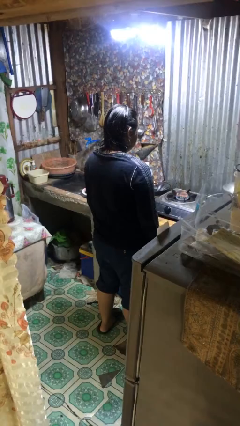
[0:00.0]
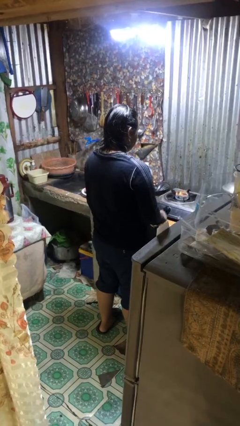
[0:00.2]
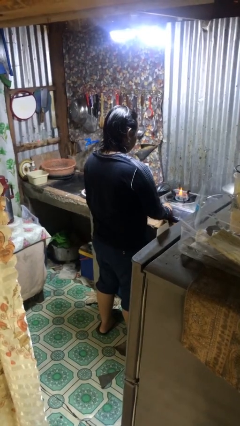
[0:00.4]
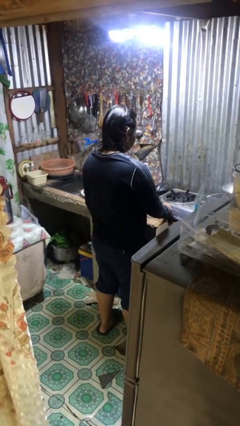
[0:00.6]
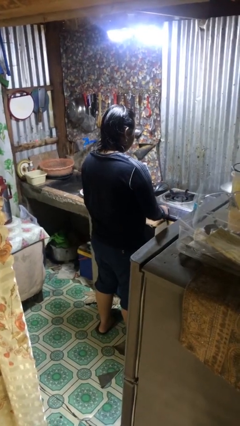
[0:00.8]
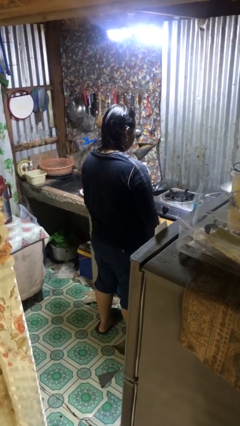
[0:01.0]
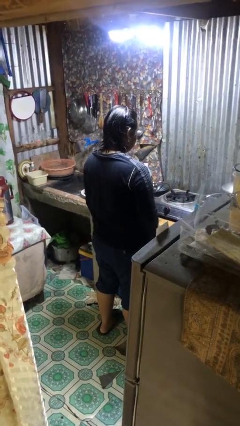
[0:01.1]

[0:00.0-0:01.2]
person turns off stovetop

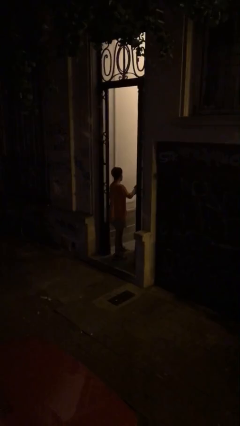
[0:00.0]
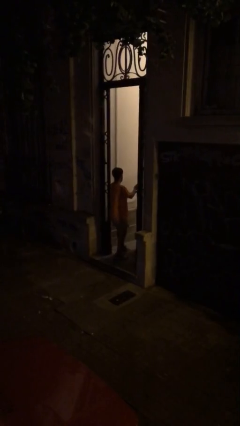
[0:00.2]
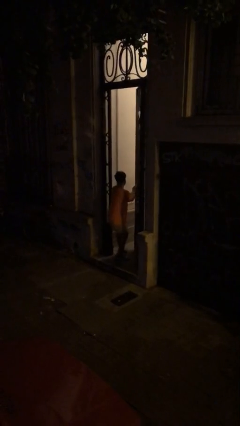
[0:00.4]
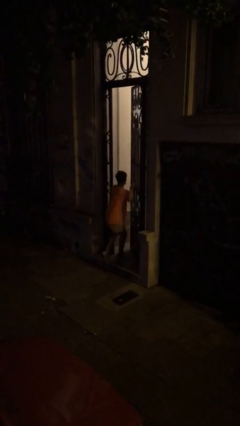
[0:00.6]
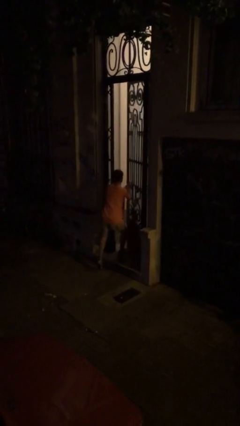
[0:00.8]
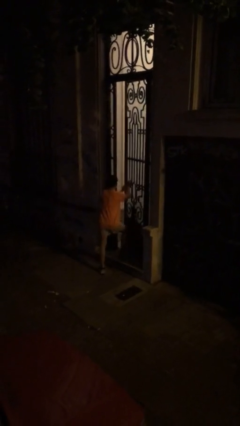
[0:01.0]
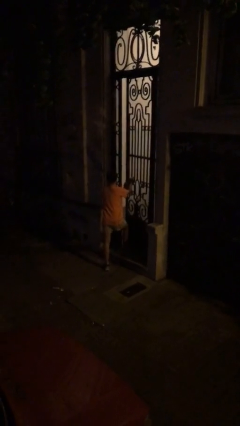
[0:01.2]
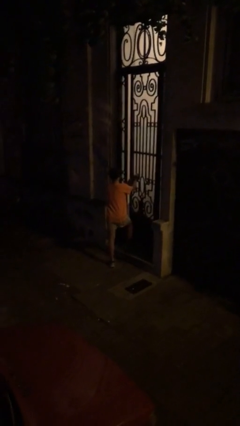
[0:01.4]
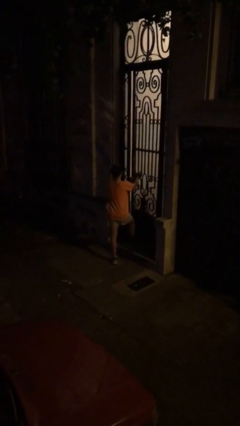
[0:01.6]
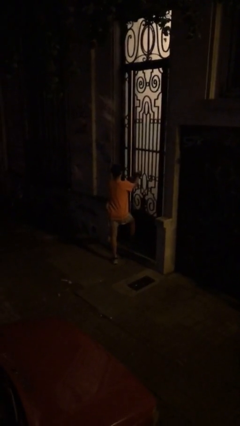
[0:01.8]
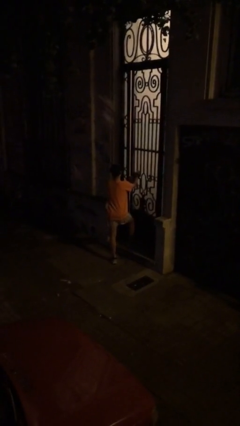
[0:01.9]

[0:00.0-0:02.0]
person closes facility door

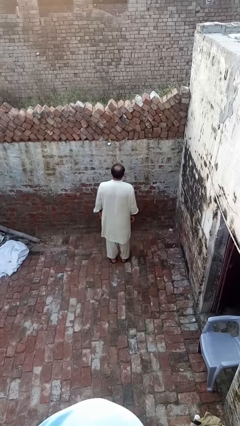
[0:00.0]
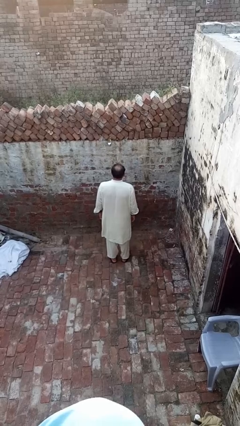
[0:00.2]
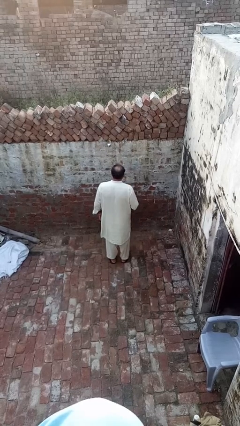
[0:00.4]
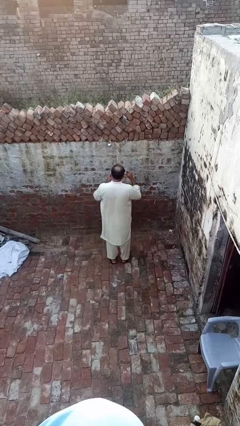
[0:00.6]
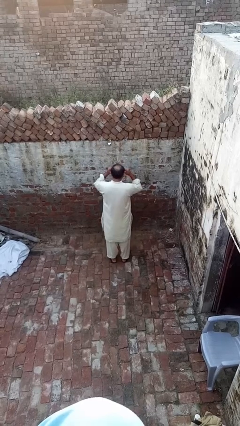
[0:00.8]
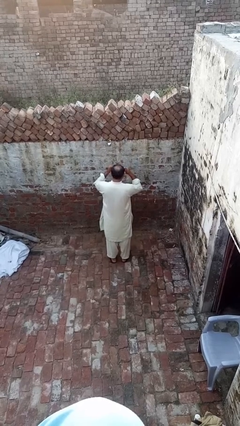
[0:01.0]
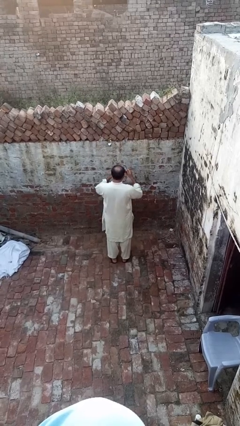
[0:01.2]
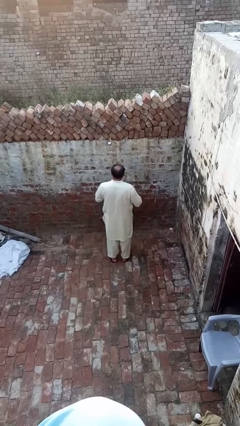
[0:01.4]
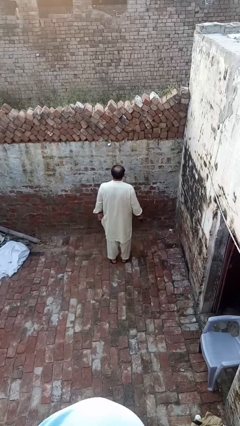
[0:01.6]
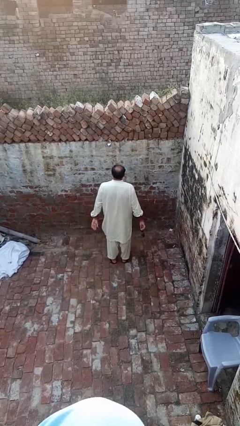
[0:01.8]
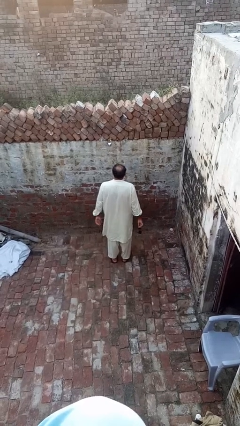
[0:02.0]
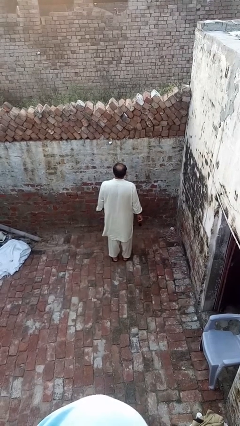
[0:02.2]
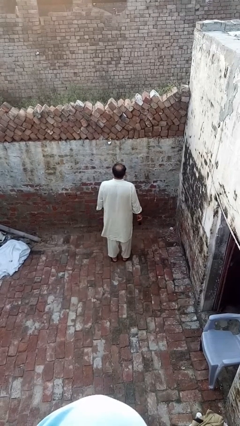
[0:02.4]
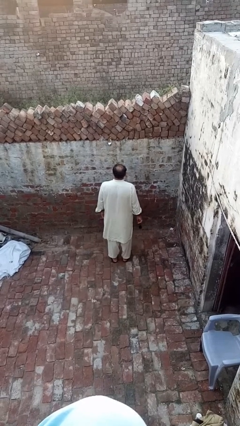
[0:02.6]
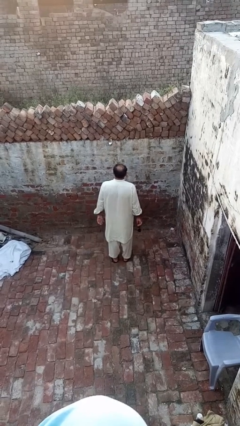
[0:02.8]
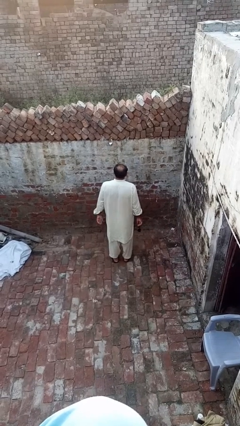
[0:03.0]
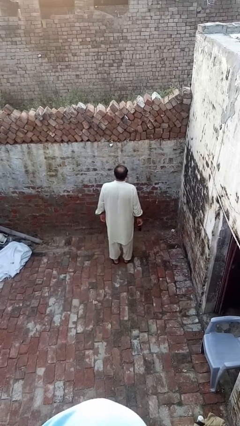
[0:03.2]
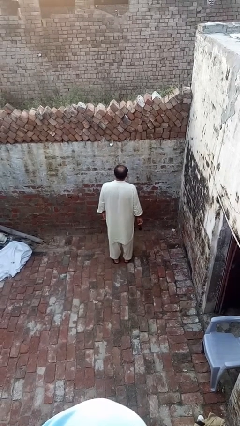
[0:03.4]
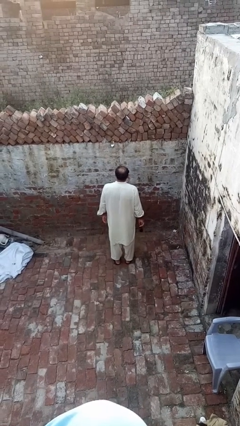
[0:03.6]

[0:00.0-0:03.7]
person takes off sunglasses

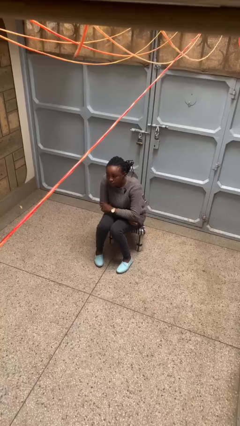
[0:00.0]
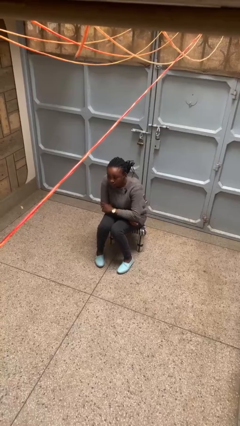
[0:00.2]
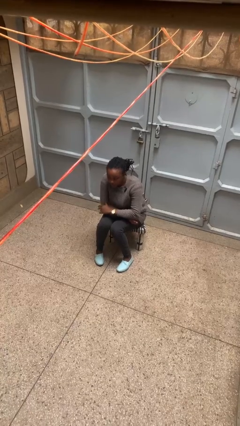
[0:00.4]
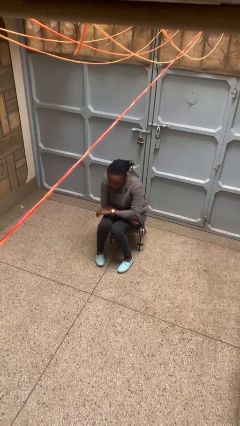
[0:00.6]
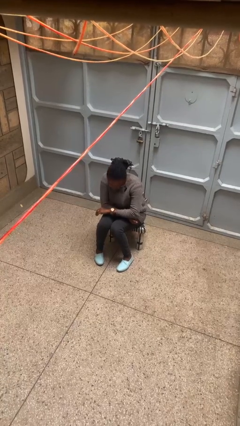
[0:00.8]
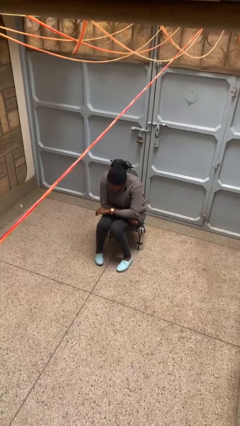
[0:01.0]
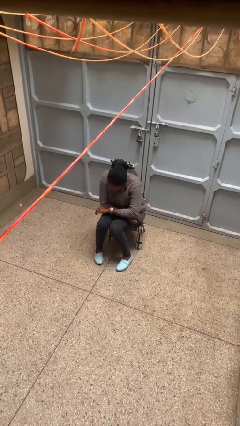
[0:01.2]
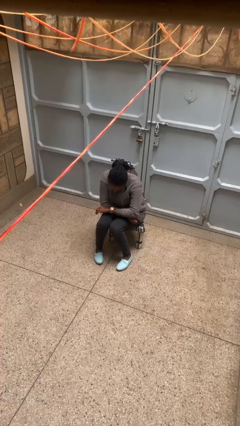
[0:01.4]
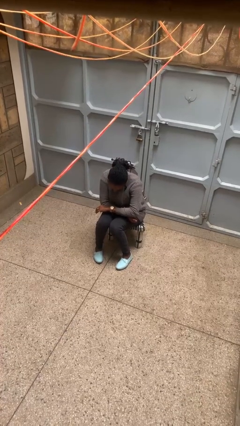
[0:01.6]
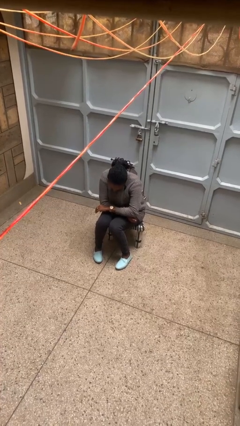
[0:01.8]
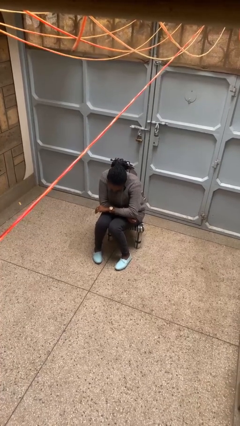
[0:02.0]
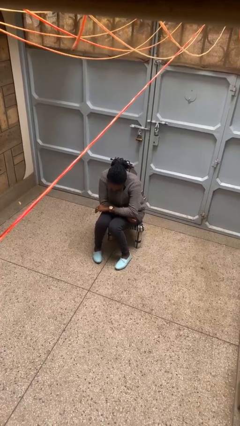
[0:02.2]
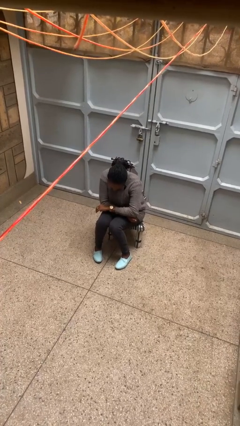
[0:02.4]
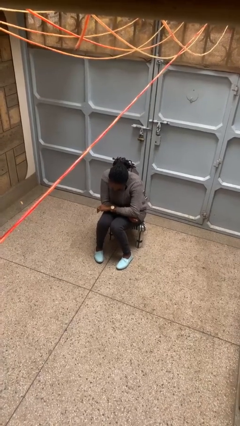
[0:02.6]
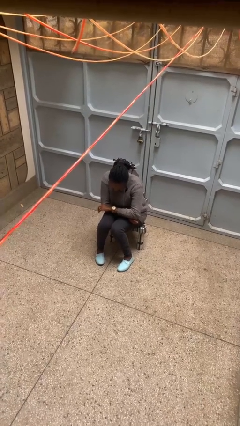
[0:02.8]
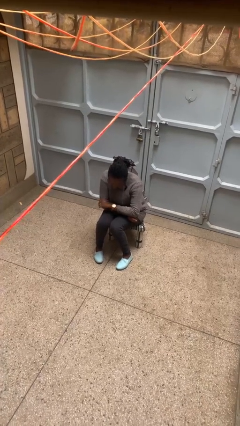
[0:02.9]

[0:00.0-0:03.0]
person looks at wristwatch

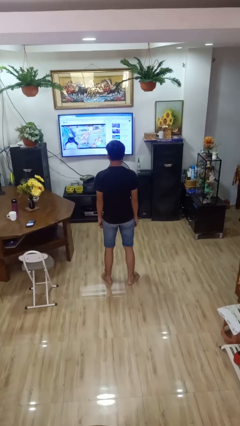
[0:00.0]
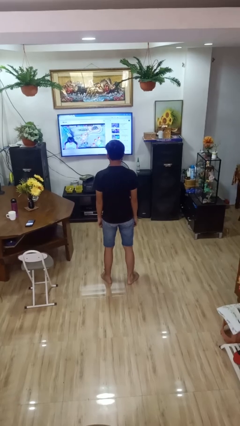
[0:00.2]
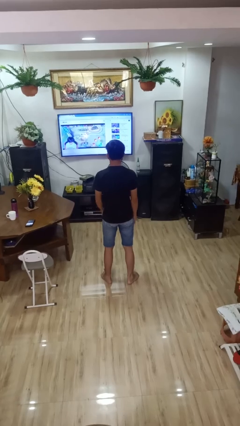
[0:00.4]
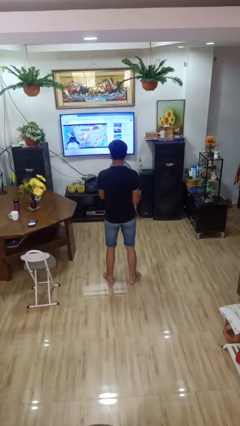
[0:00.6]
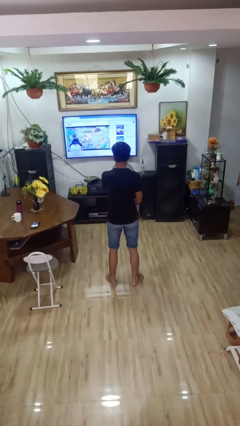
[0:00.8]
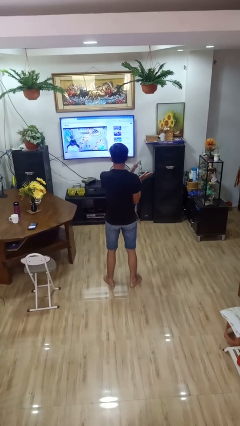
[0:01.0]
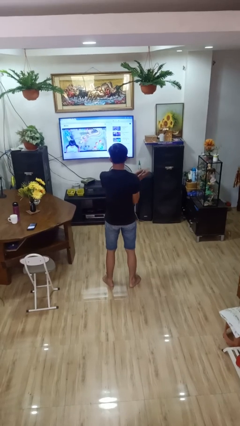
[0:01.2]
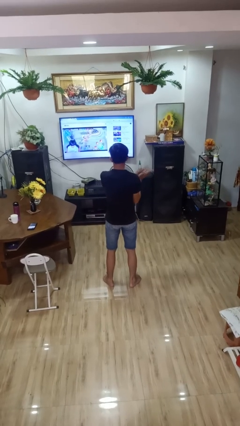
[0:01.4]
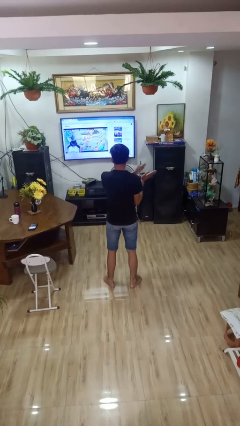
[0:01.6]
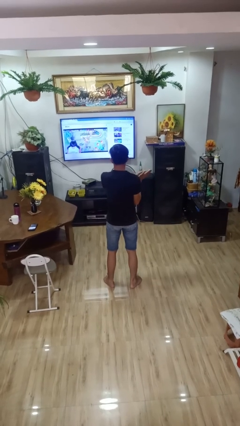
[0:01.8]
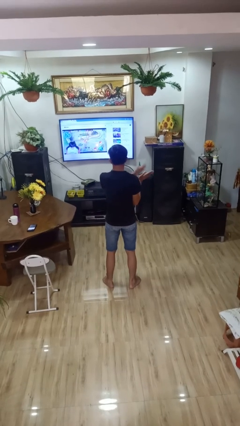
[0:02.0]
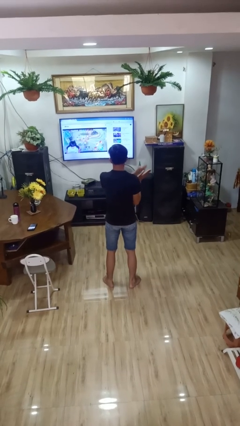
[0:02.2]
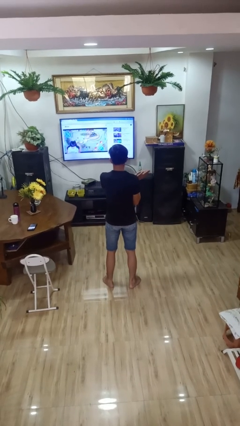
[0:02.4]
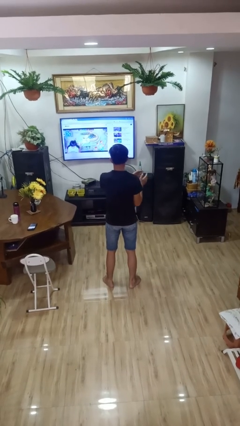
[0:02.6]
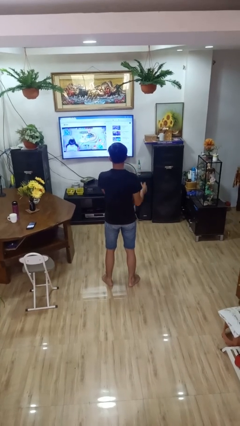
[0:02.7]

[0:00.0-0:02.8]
person claps hands

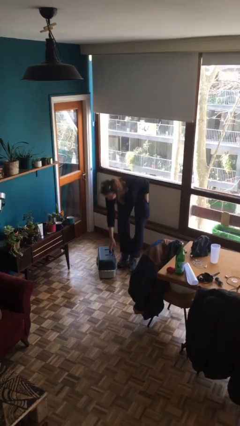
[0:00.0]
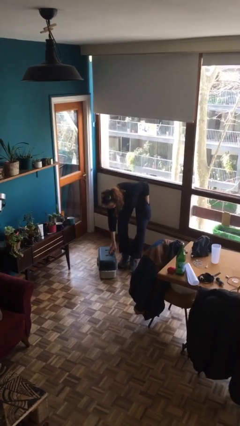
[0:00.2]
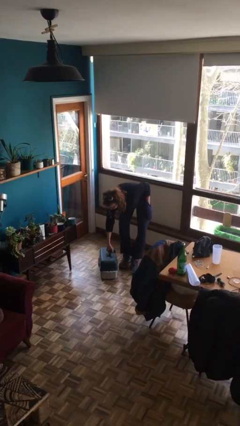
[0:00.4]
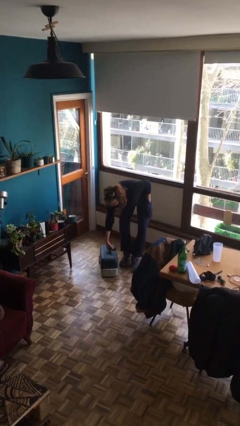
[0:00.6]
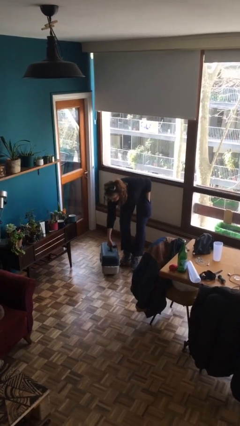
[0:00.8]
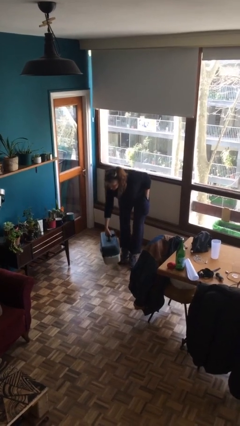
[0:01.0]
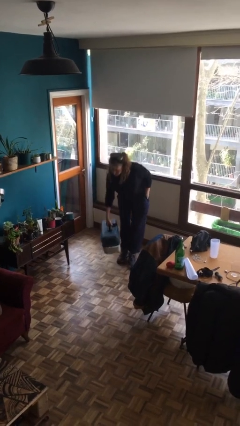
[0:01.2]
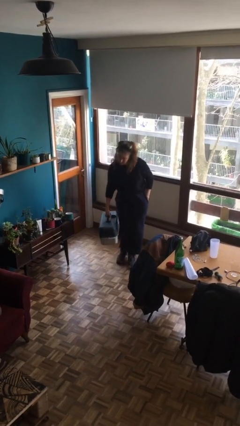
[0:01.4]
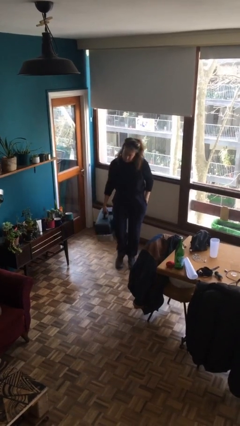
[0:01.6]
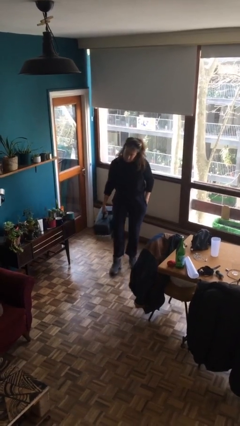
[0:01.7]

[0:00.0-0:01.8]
person picks up object from floor

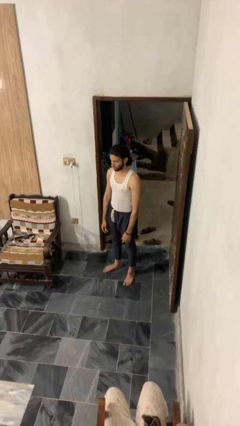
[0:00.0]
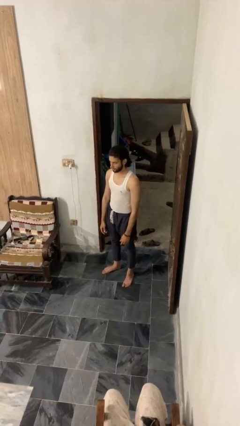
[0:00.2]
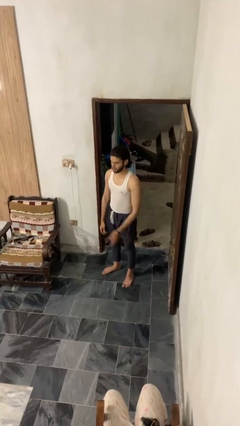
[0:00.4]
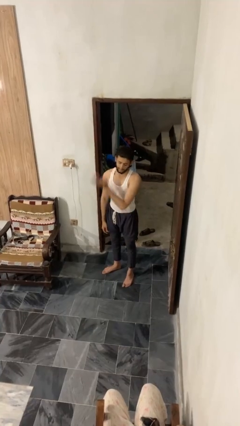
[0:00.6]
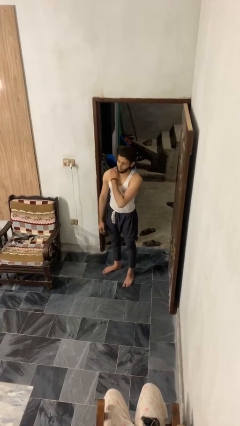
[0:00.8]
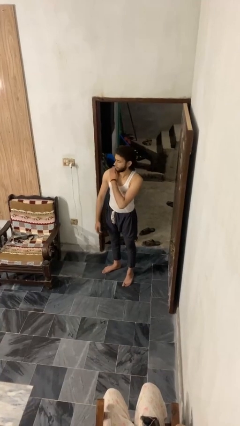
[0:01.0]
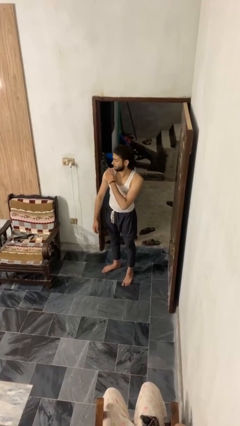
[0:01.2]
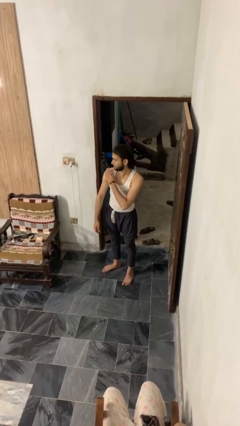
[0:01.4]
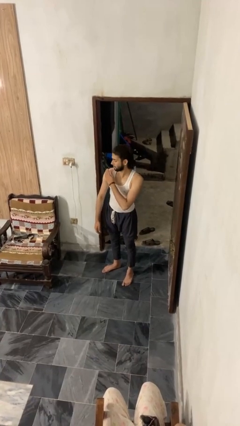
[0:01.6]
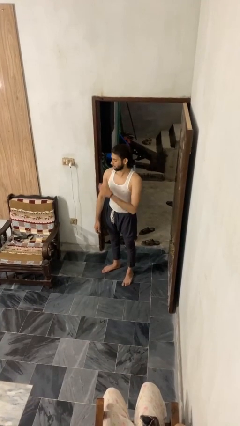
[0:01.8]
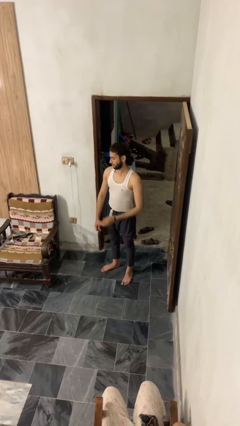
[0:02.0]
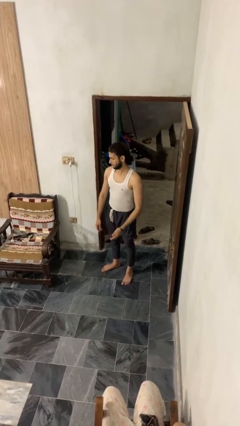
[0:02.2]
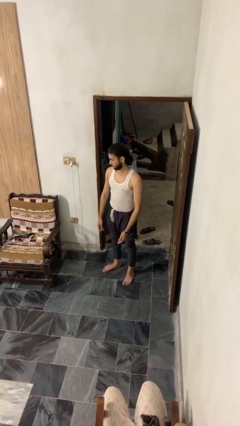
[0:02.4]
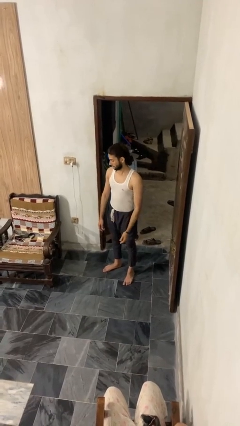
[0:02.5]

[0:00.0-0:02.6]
person swats bug
